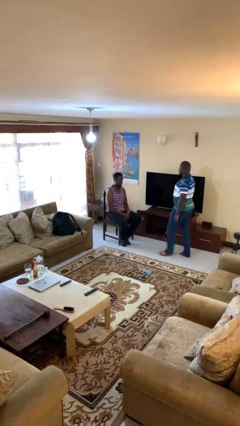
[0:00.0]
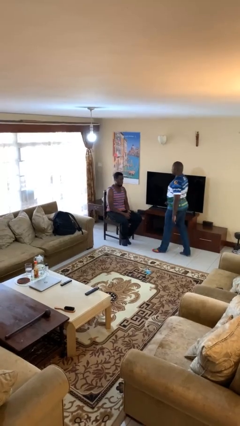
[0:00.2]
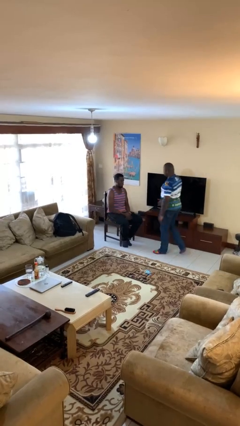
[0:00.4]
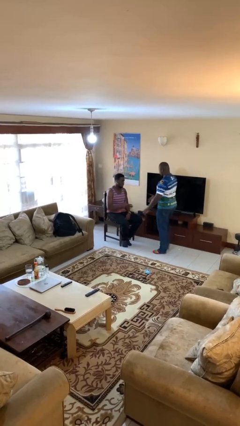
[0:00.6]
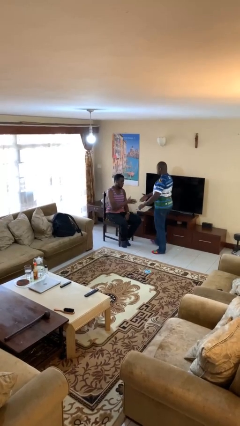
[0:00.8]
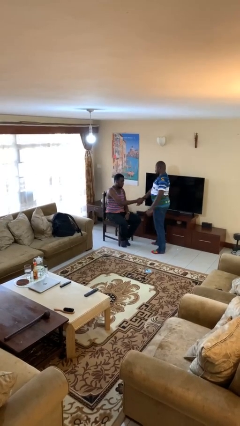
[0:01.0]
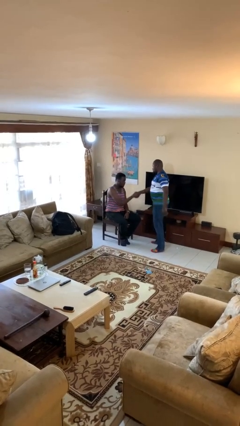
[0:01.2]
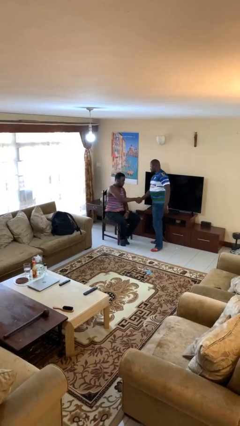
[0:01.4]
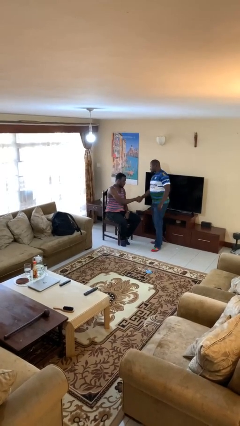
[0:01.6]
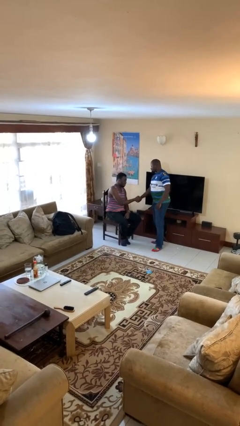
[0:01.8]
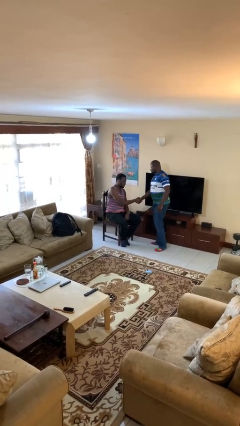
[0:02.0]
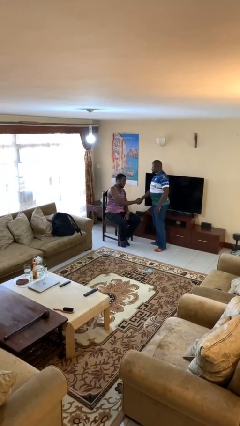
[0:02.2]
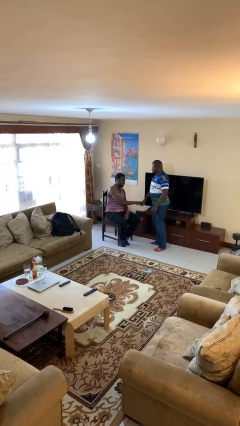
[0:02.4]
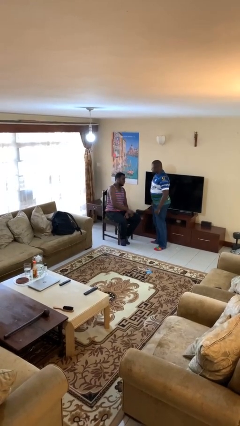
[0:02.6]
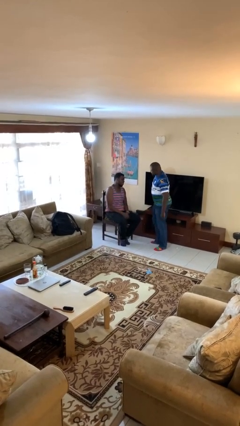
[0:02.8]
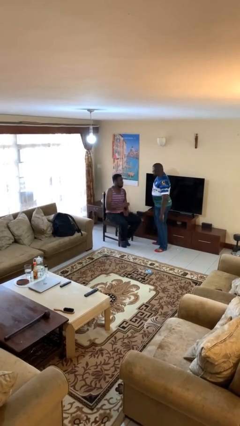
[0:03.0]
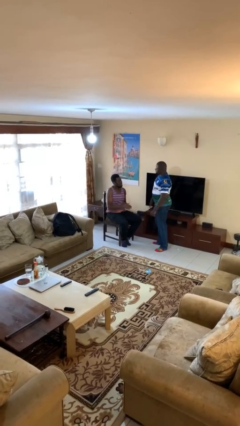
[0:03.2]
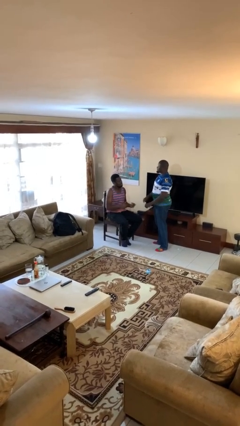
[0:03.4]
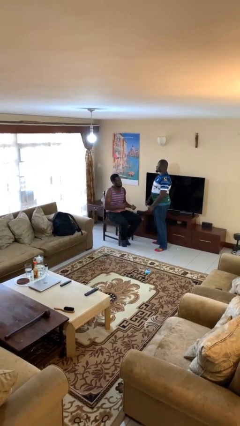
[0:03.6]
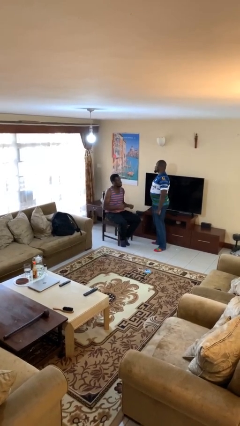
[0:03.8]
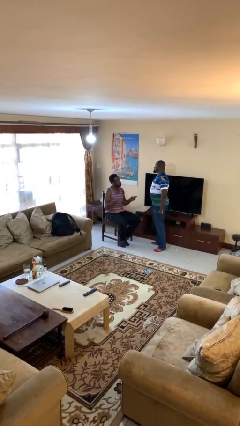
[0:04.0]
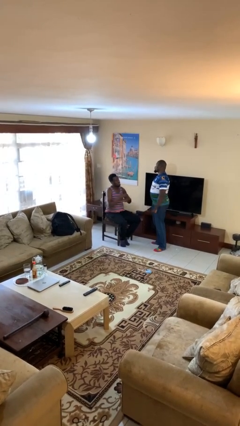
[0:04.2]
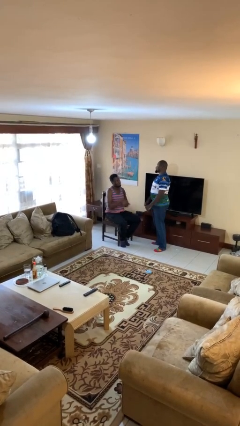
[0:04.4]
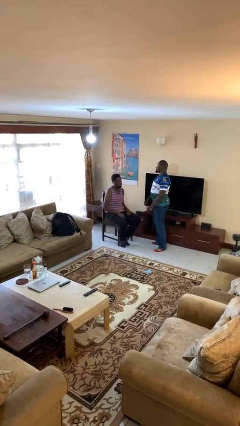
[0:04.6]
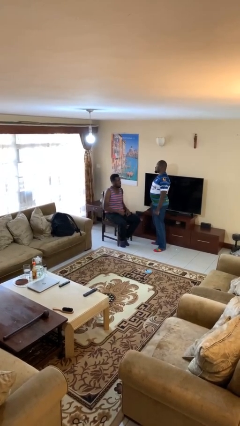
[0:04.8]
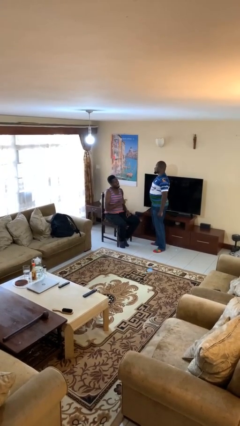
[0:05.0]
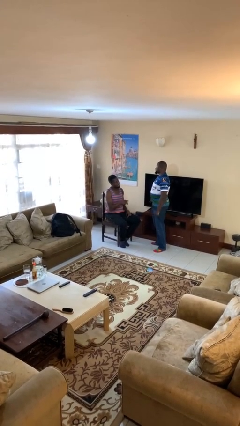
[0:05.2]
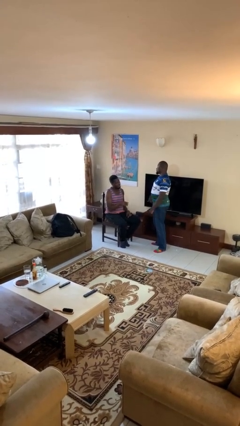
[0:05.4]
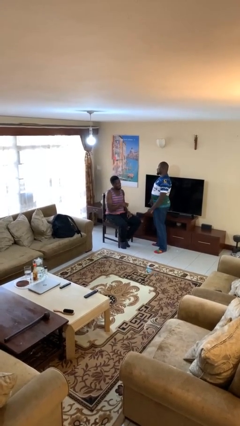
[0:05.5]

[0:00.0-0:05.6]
person shakes hand

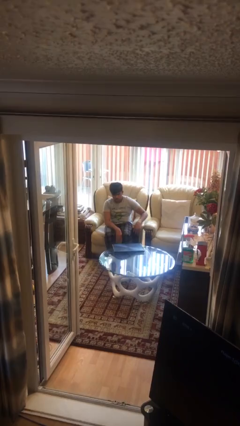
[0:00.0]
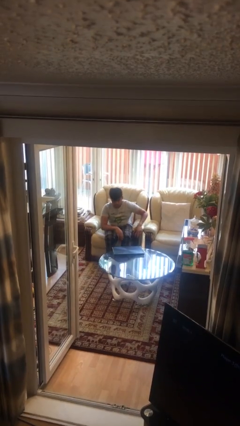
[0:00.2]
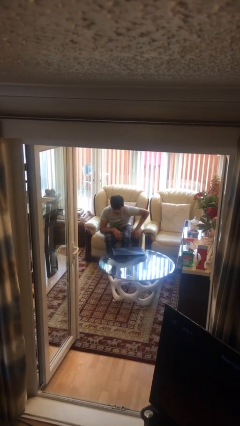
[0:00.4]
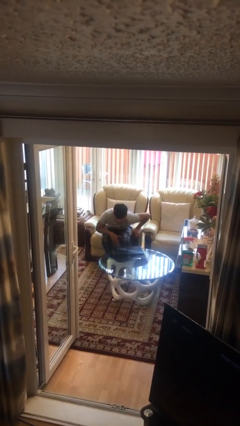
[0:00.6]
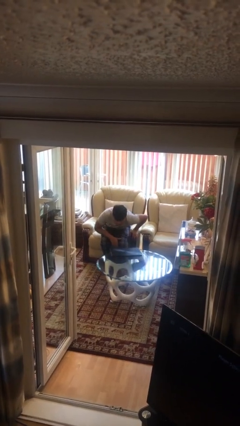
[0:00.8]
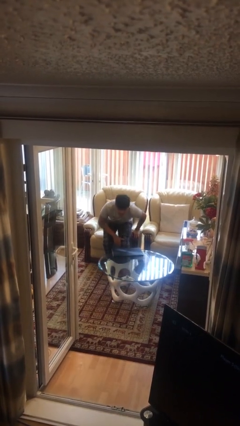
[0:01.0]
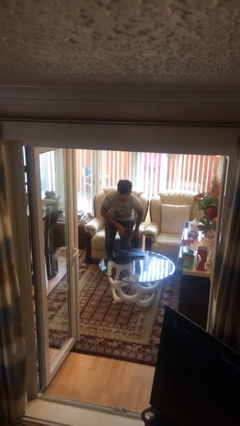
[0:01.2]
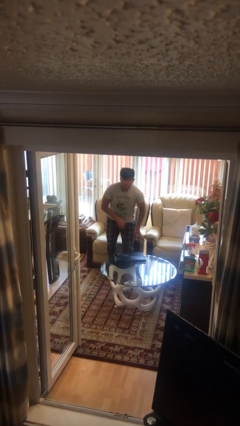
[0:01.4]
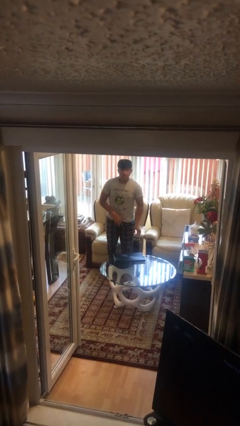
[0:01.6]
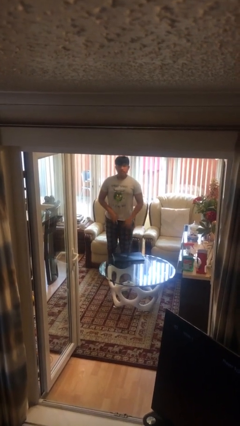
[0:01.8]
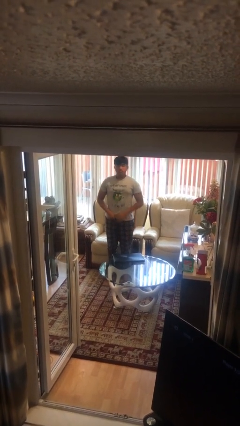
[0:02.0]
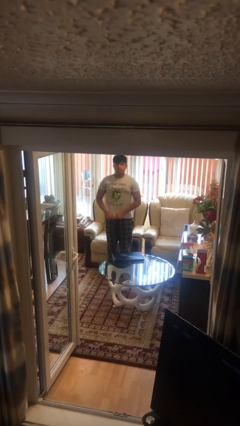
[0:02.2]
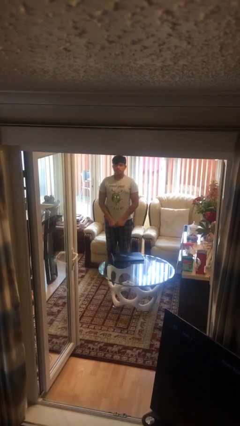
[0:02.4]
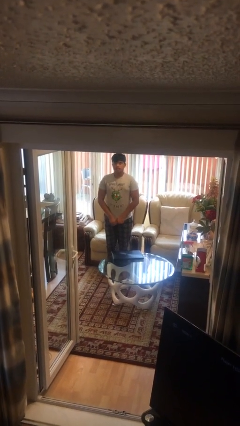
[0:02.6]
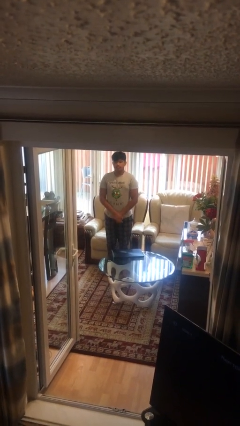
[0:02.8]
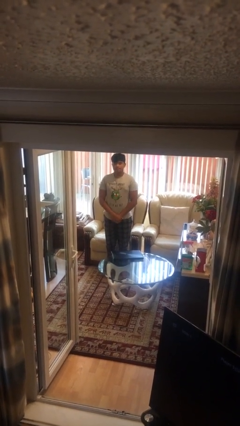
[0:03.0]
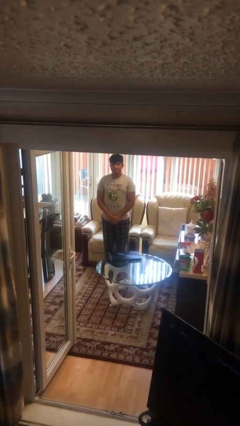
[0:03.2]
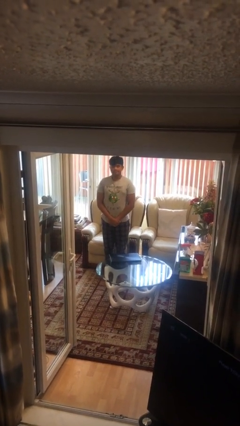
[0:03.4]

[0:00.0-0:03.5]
person stands up

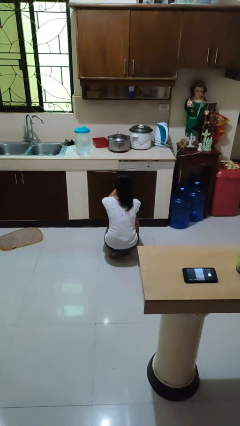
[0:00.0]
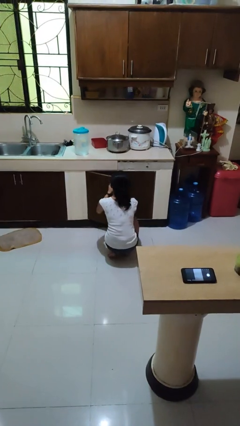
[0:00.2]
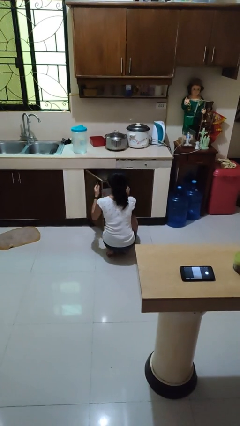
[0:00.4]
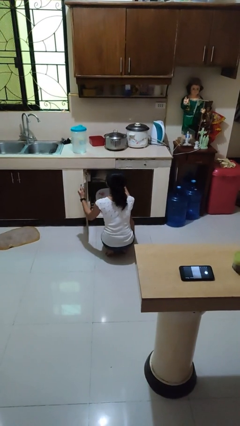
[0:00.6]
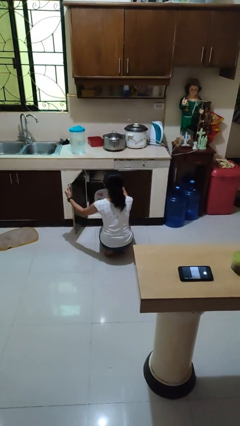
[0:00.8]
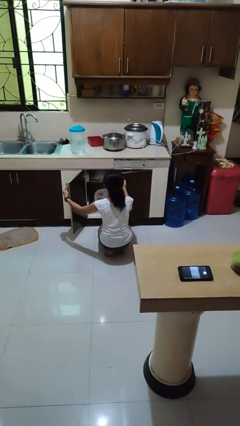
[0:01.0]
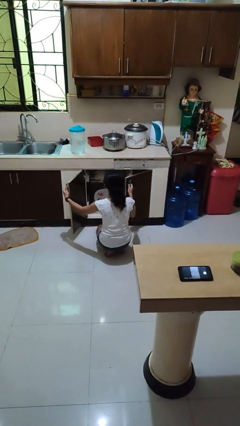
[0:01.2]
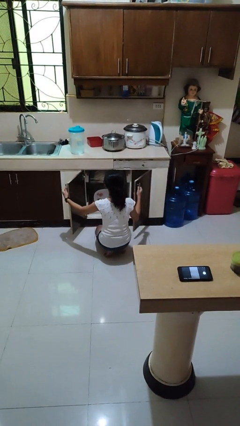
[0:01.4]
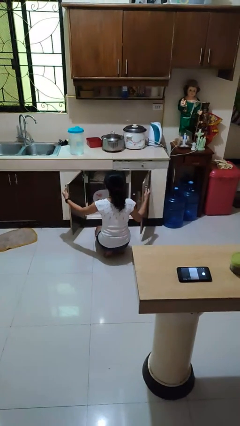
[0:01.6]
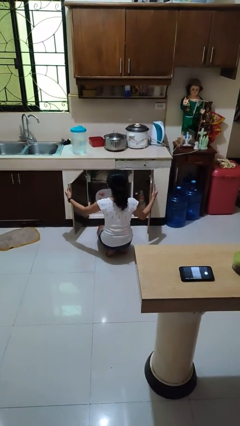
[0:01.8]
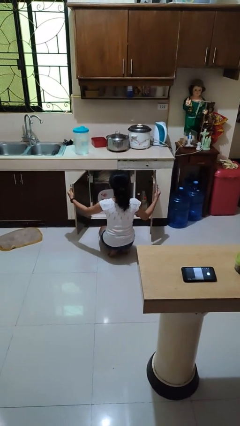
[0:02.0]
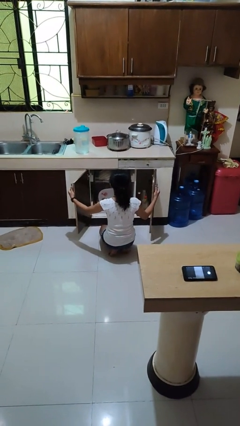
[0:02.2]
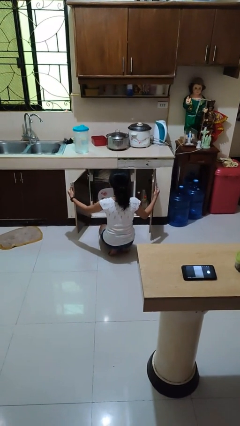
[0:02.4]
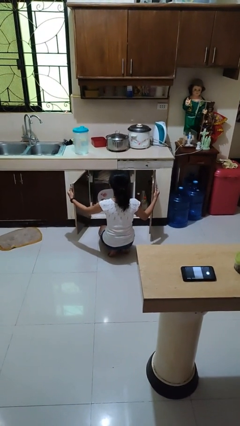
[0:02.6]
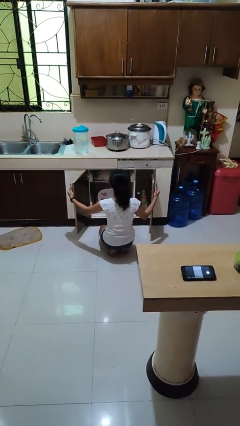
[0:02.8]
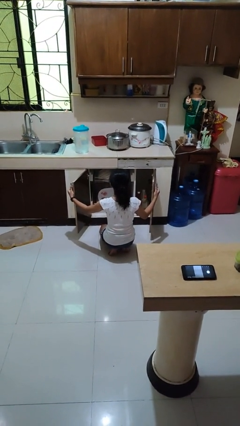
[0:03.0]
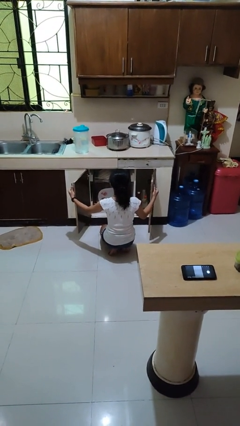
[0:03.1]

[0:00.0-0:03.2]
person opens dishwasher

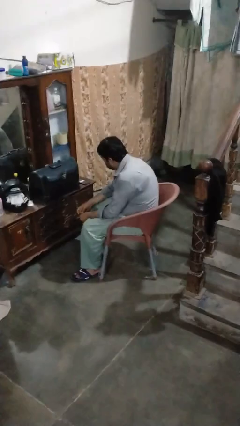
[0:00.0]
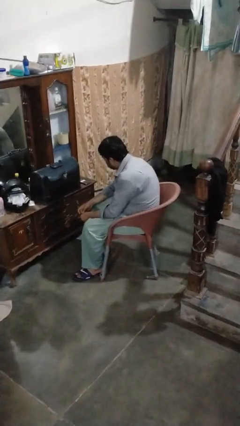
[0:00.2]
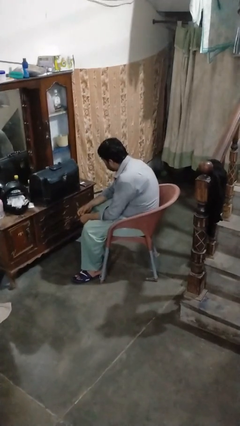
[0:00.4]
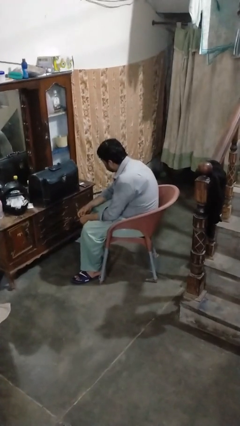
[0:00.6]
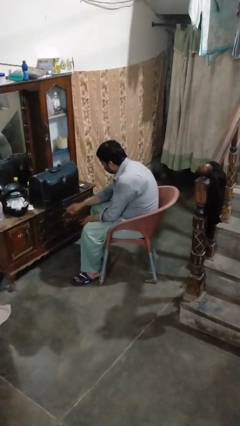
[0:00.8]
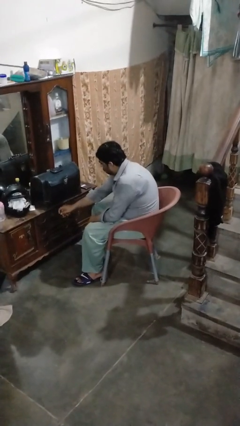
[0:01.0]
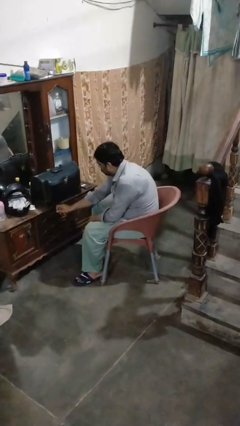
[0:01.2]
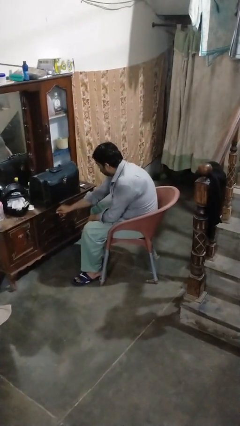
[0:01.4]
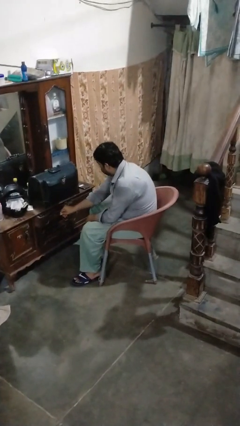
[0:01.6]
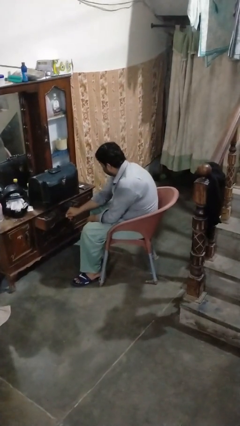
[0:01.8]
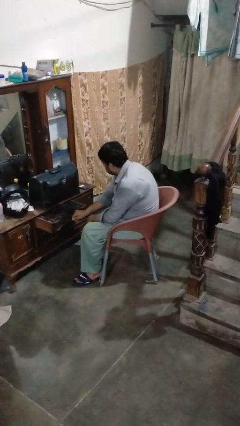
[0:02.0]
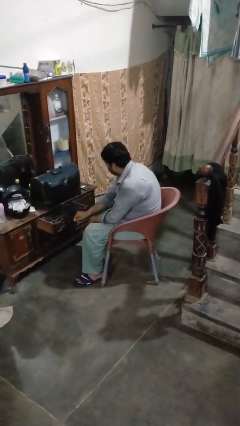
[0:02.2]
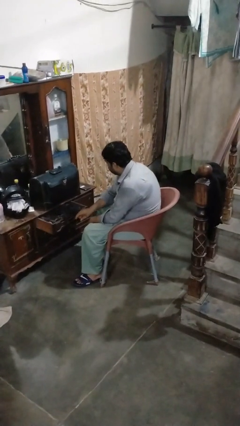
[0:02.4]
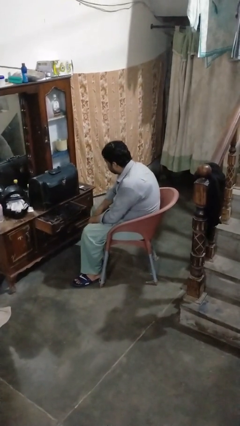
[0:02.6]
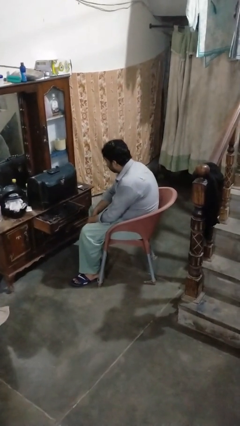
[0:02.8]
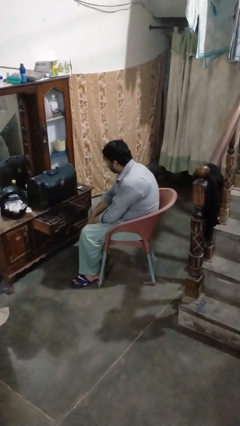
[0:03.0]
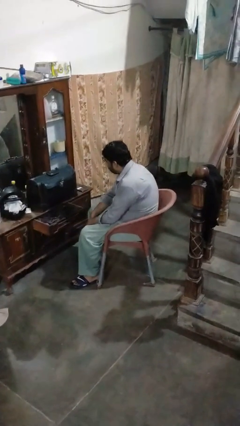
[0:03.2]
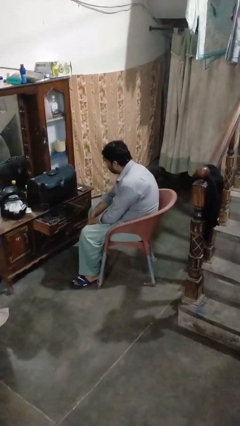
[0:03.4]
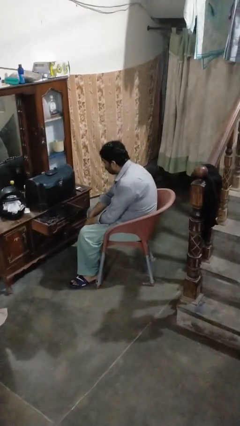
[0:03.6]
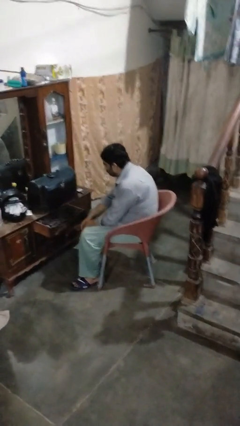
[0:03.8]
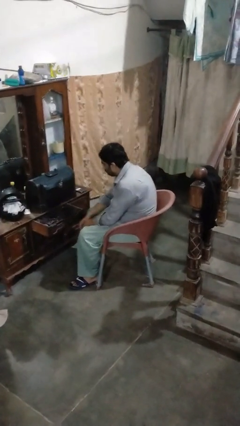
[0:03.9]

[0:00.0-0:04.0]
person opens dresser drawer

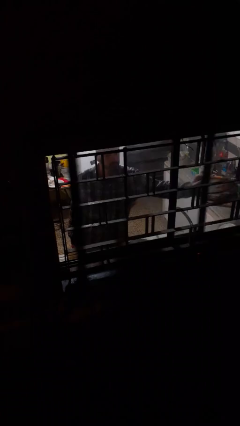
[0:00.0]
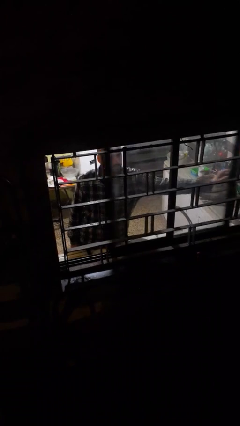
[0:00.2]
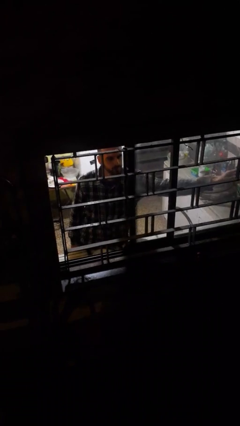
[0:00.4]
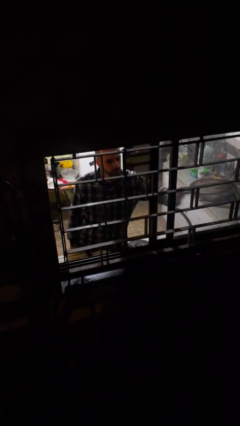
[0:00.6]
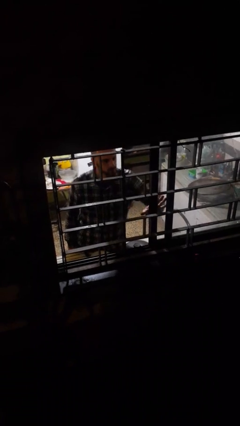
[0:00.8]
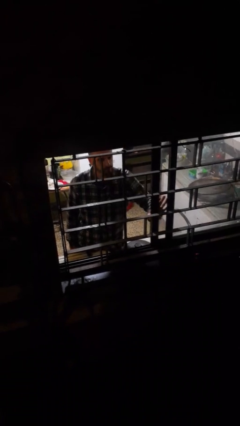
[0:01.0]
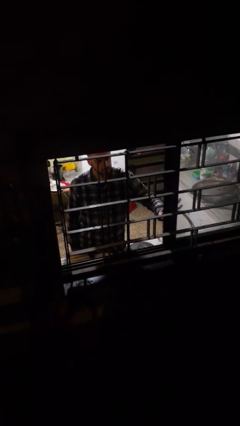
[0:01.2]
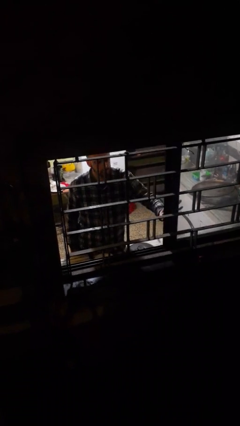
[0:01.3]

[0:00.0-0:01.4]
person opens home window

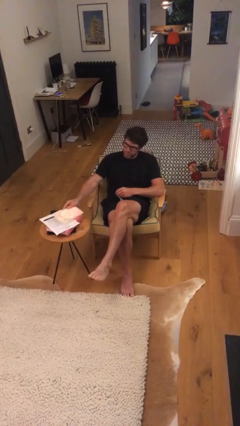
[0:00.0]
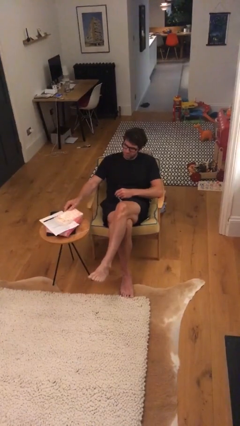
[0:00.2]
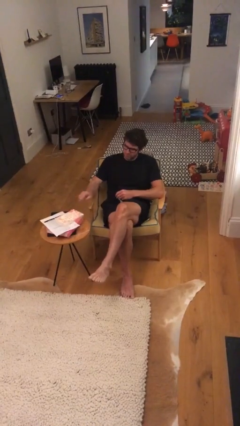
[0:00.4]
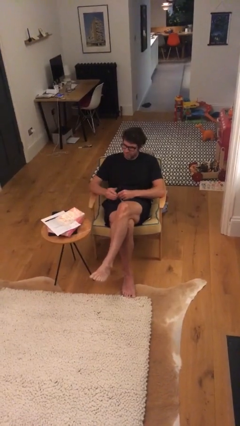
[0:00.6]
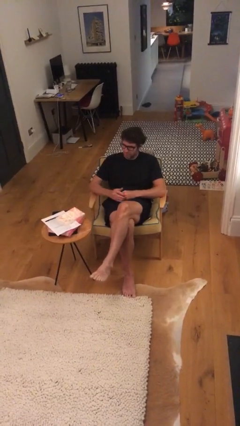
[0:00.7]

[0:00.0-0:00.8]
person puts down object on table
